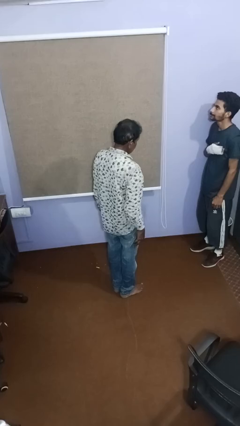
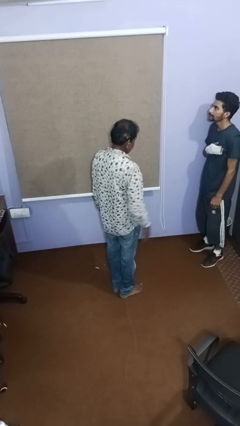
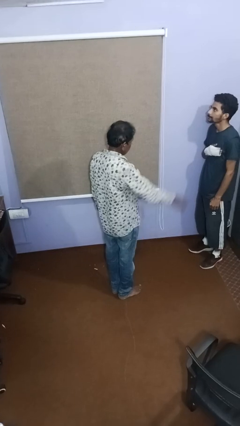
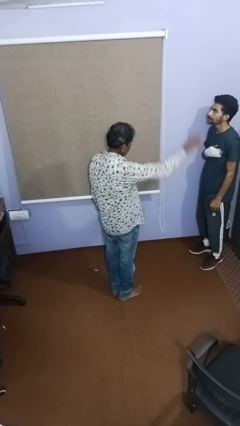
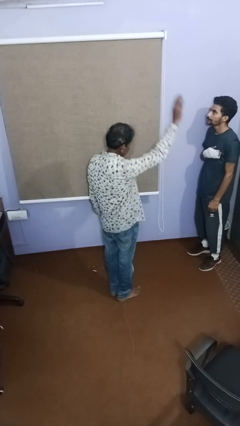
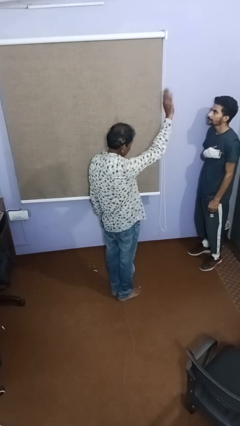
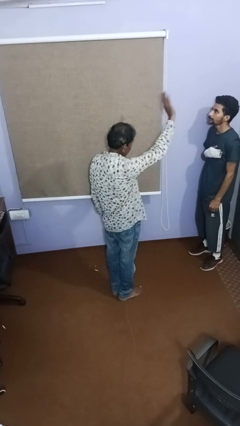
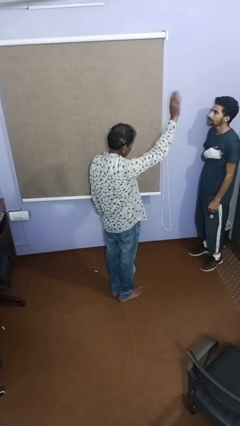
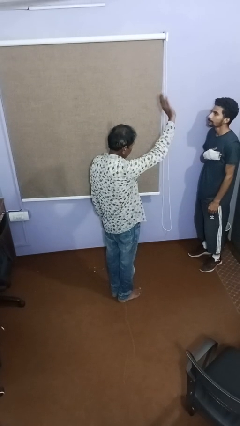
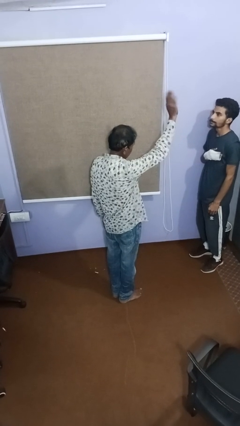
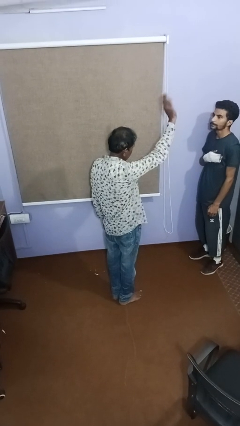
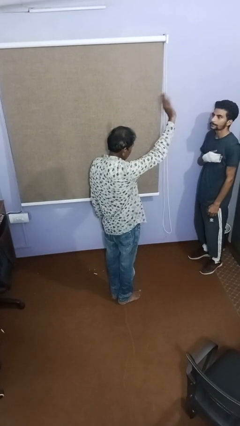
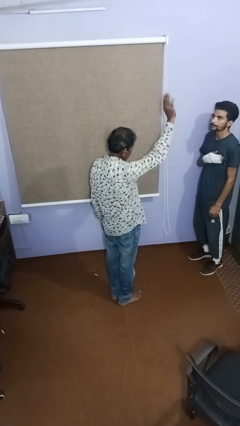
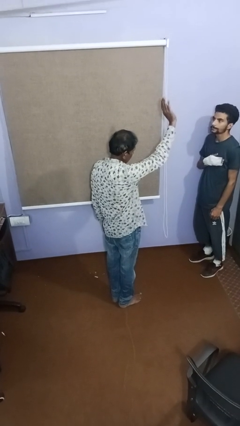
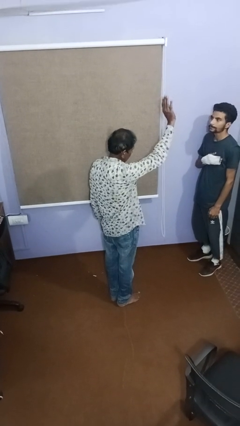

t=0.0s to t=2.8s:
person waves at person

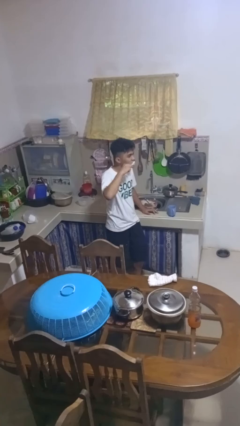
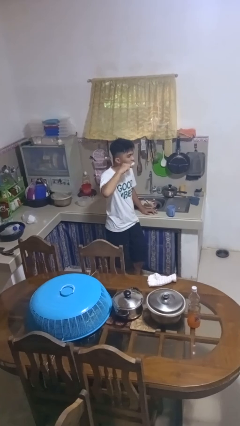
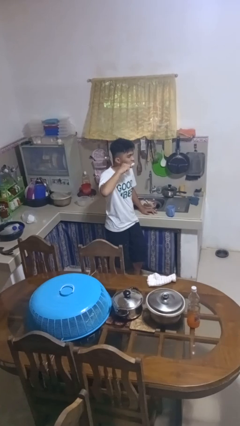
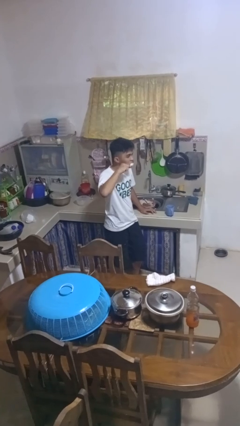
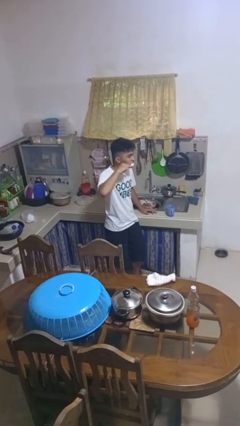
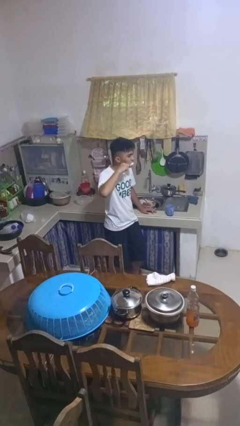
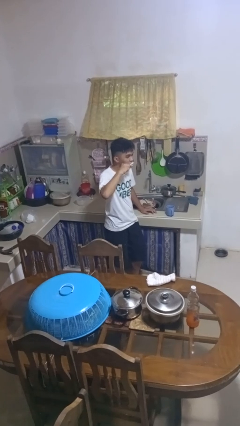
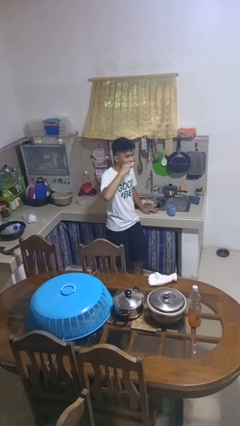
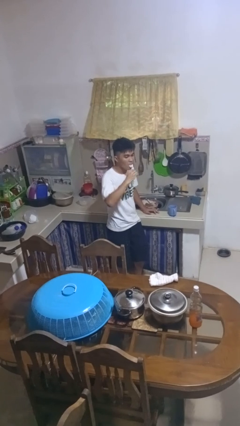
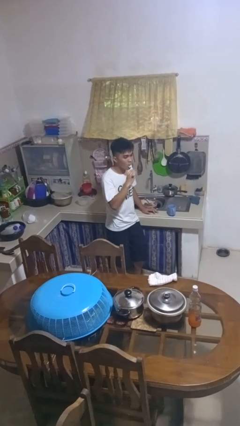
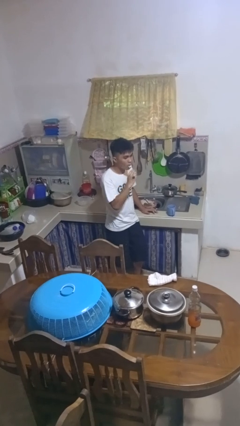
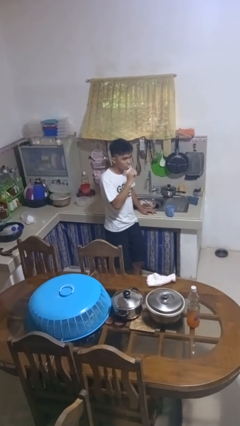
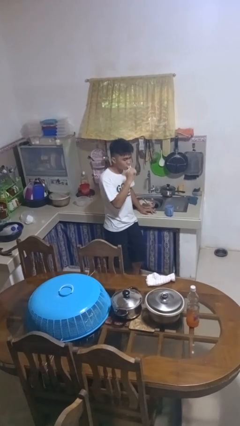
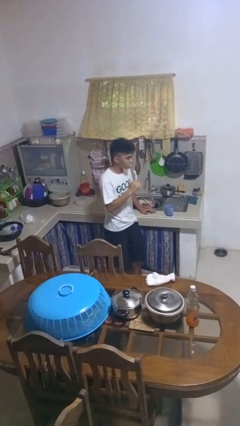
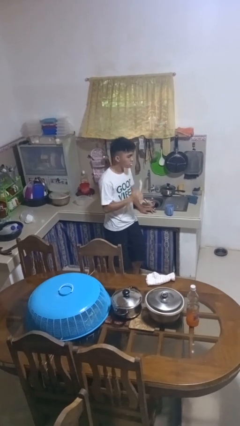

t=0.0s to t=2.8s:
person brushes teeth

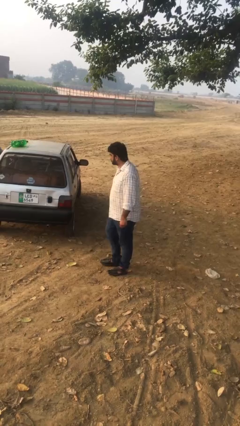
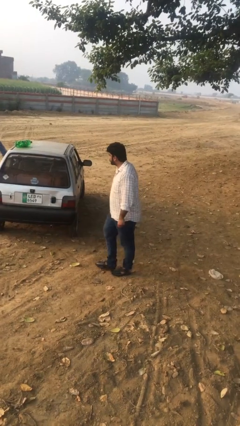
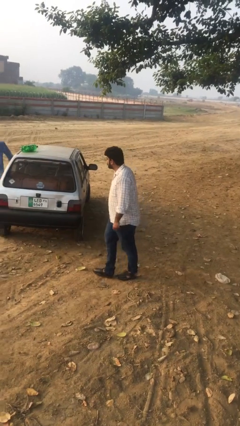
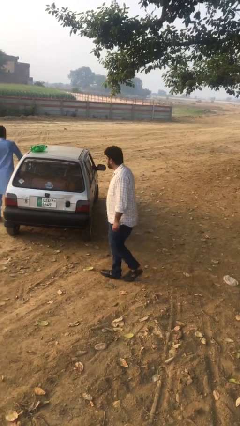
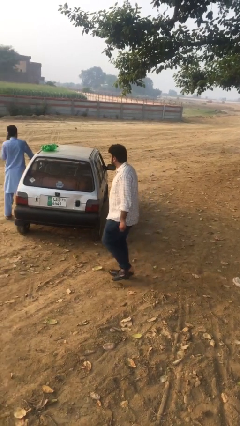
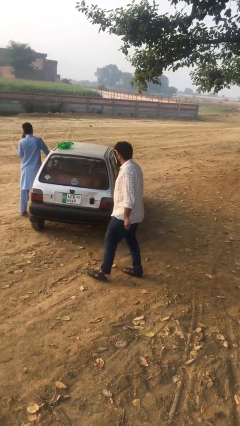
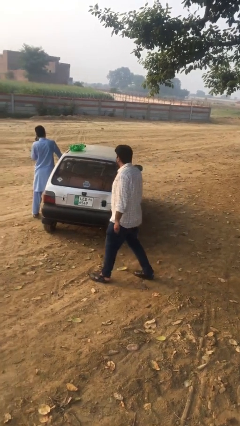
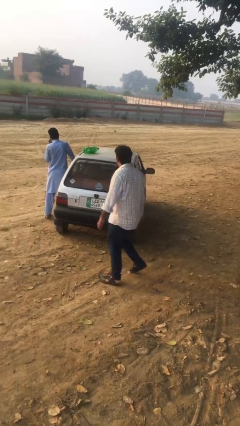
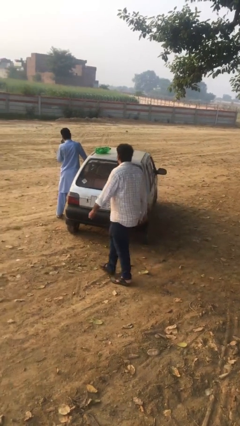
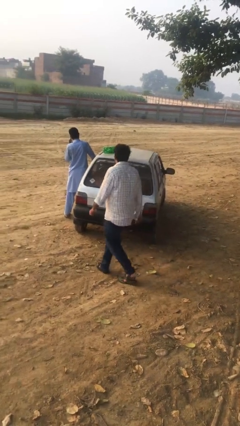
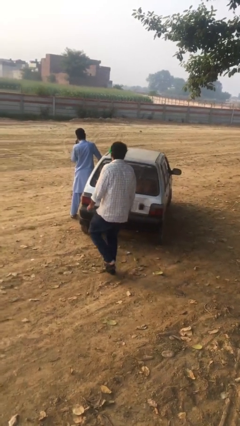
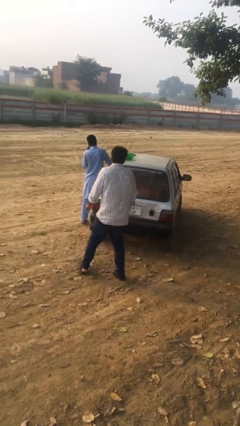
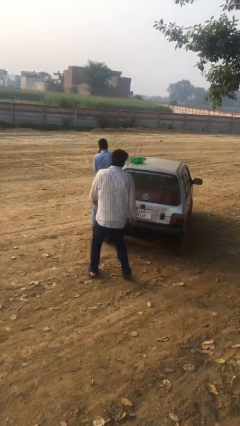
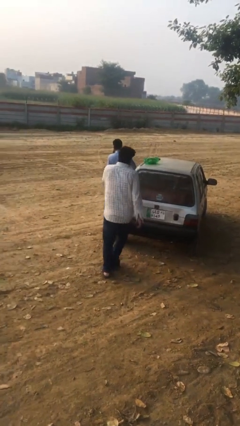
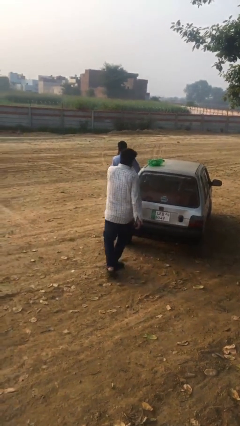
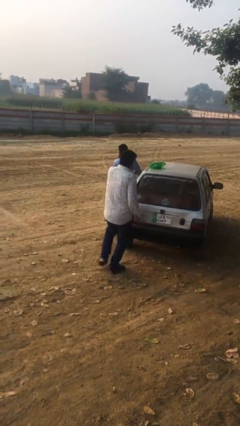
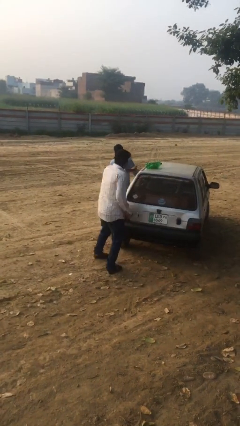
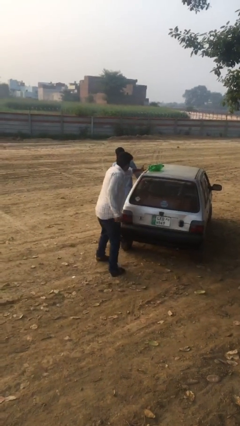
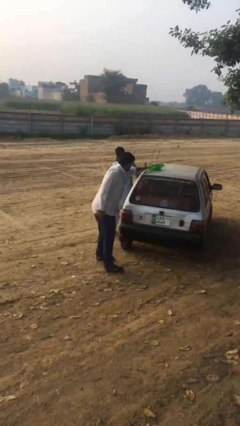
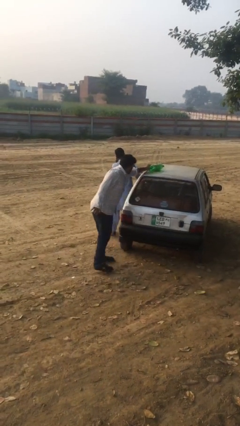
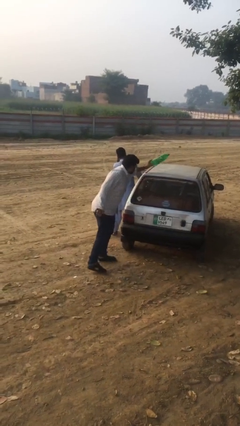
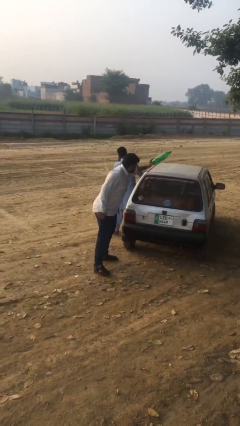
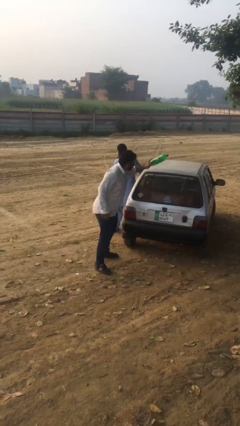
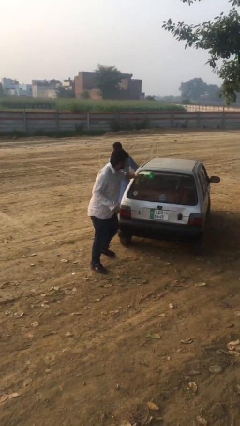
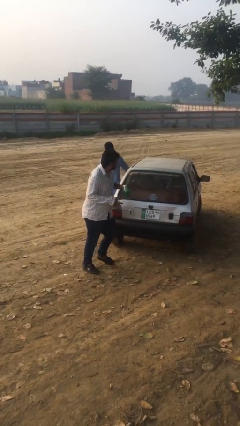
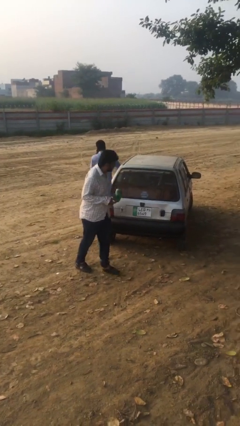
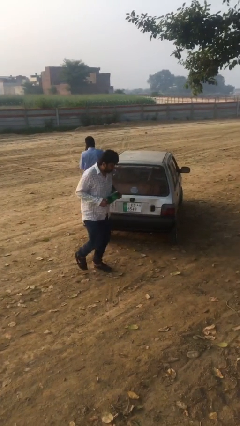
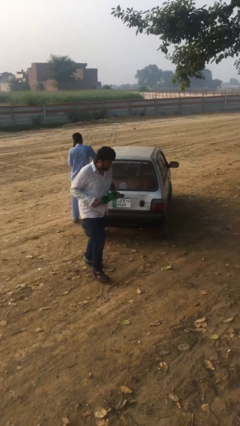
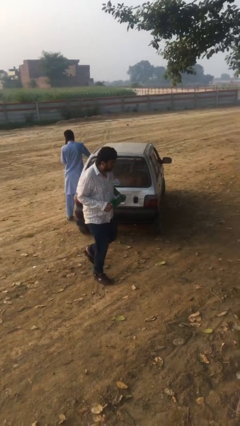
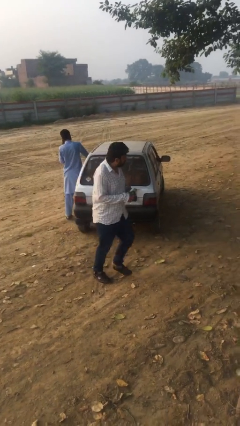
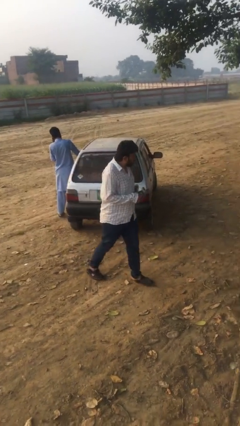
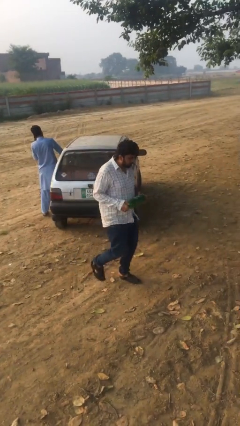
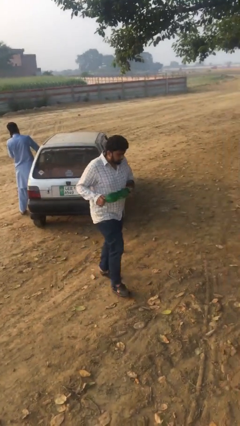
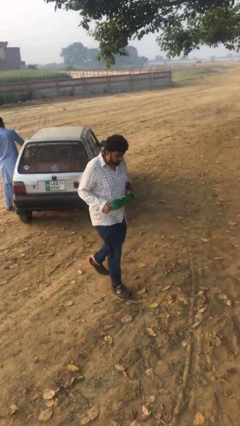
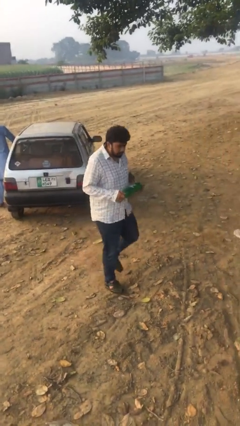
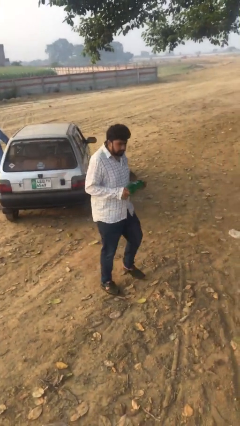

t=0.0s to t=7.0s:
person steals object from person

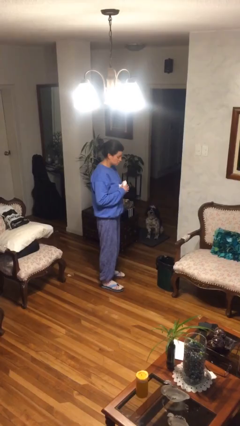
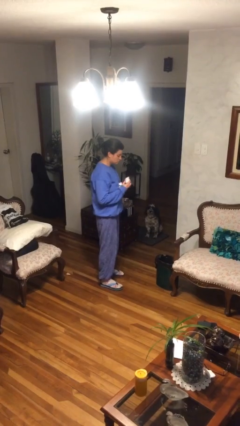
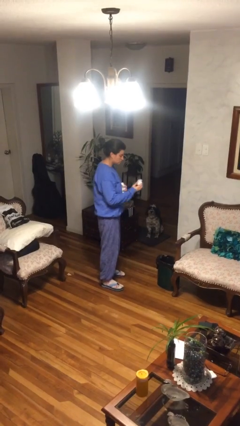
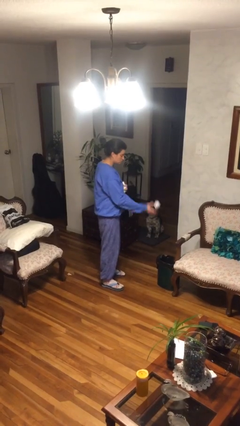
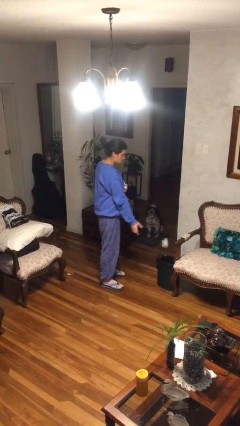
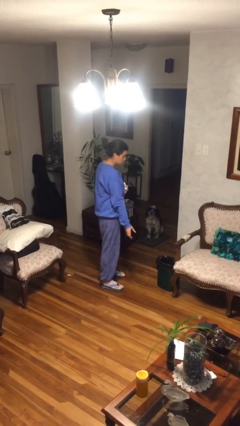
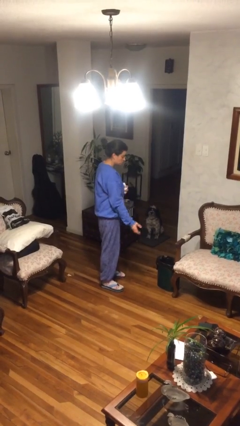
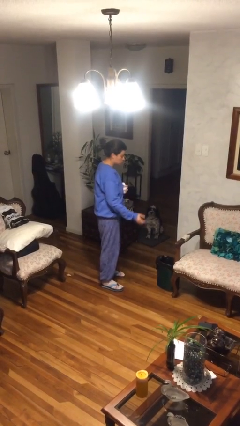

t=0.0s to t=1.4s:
person discards trash

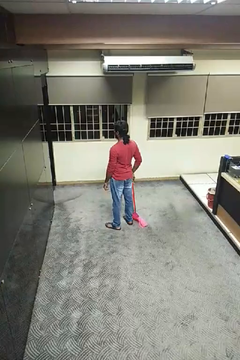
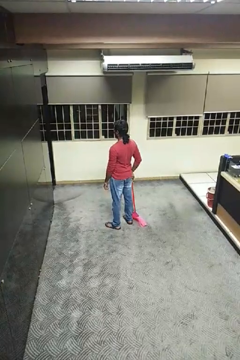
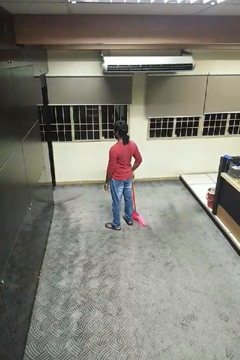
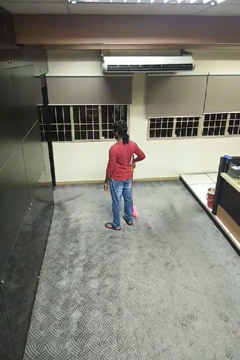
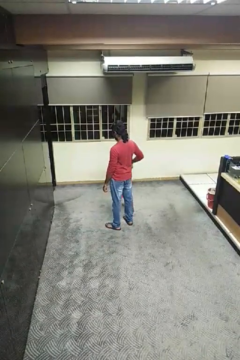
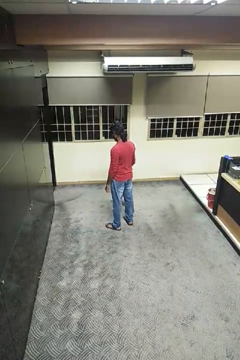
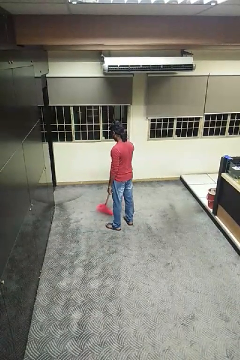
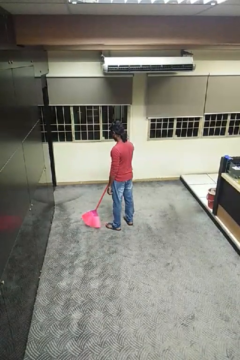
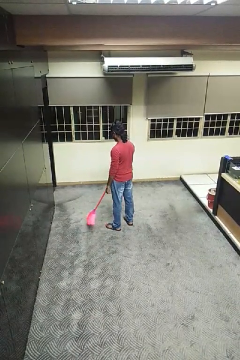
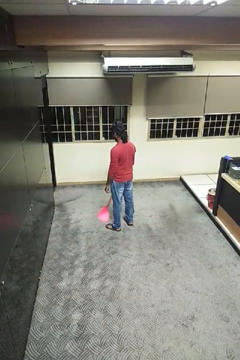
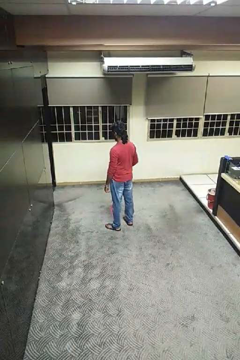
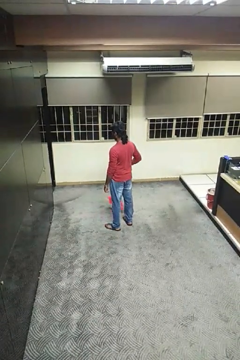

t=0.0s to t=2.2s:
person sweeps floor

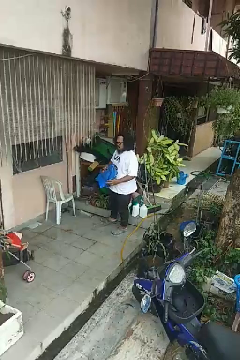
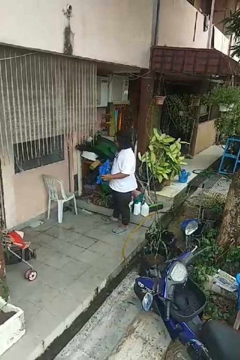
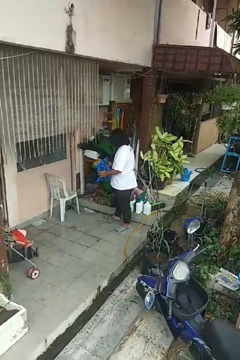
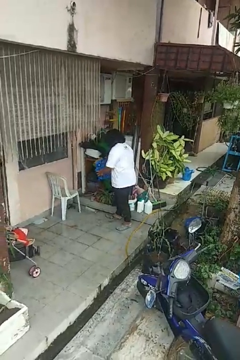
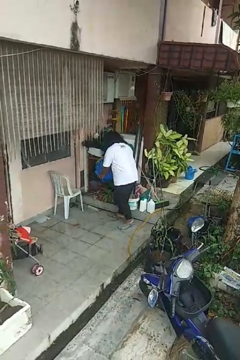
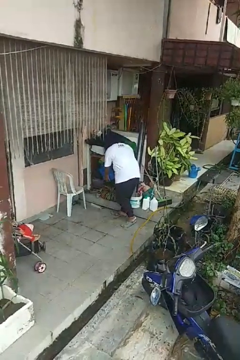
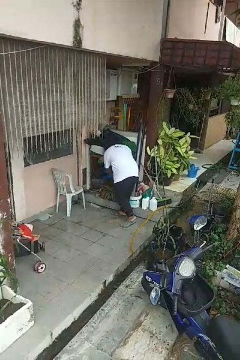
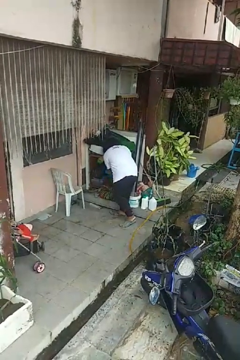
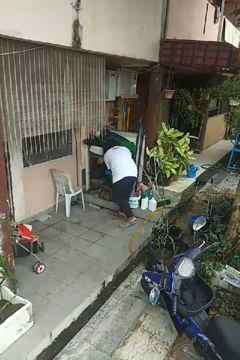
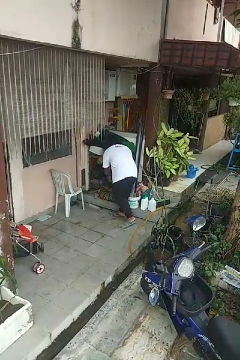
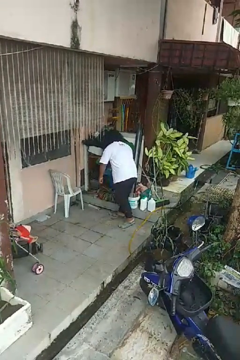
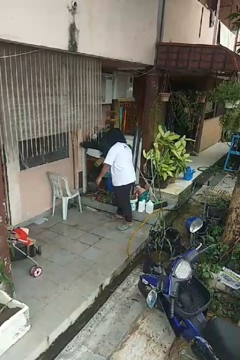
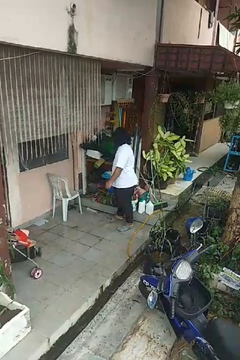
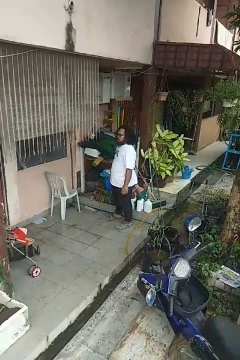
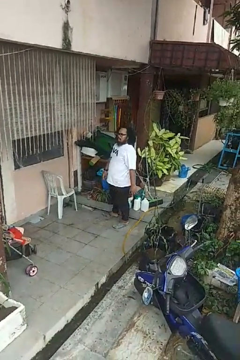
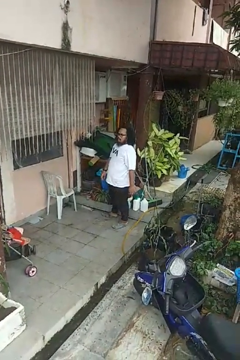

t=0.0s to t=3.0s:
person puts down object into cabinet
